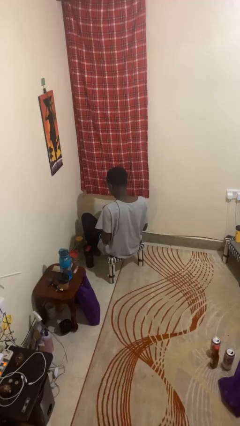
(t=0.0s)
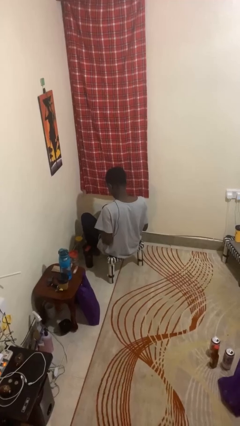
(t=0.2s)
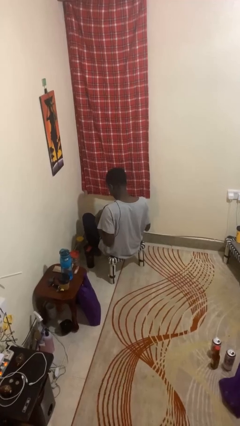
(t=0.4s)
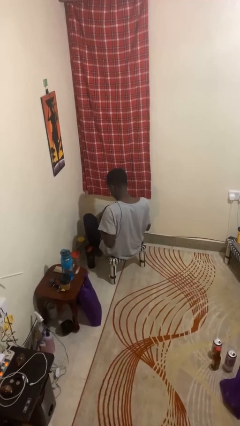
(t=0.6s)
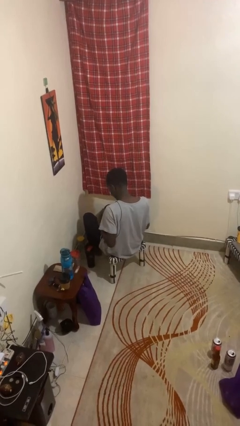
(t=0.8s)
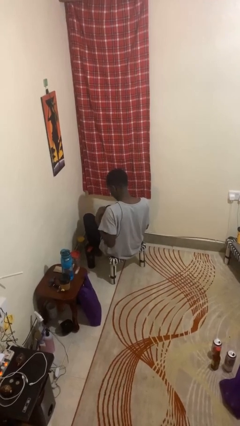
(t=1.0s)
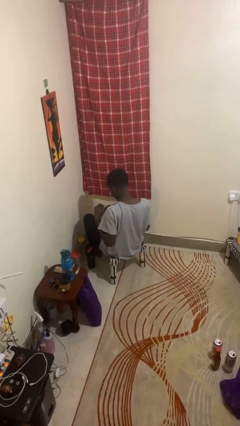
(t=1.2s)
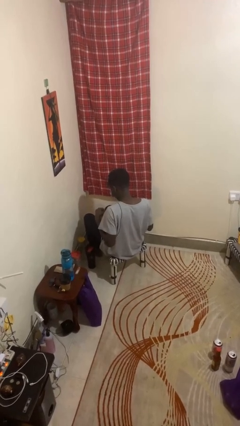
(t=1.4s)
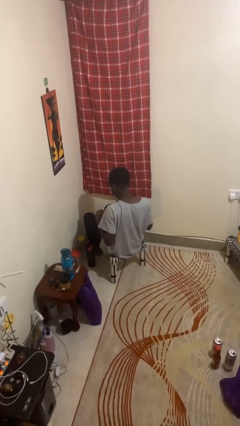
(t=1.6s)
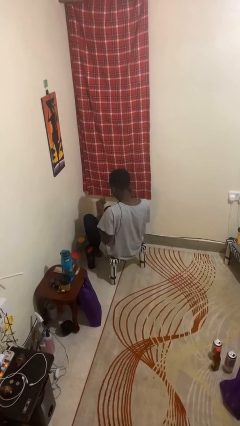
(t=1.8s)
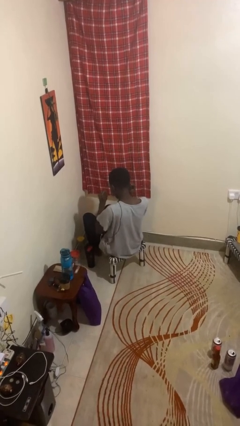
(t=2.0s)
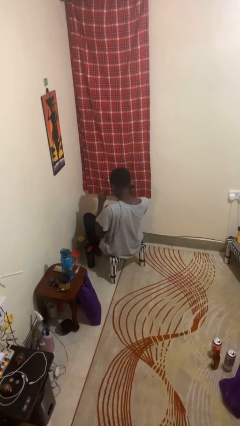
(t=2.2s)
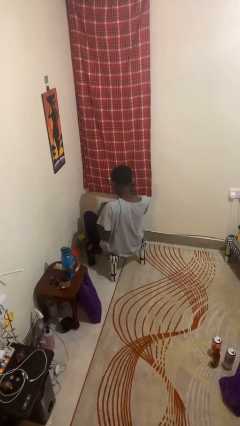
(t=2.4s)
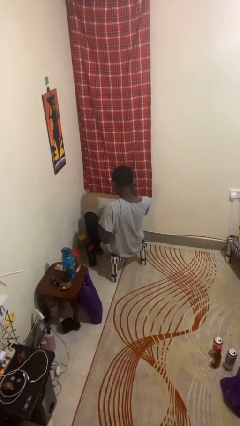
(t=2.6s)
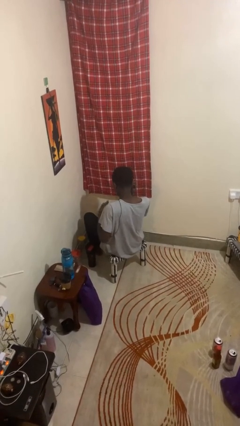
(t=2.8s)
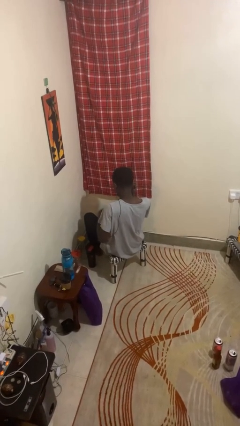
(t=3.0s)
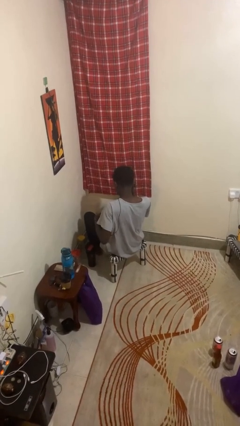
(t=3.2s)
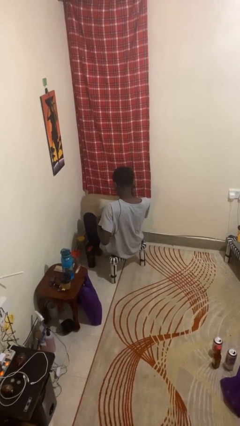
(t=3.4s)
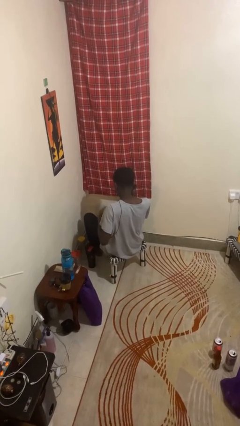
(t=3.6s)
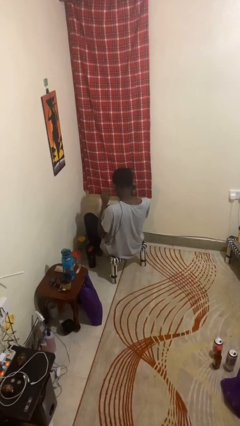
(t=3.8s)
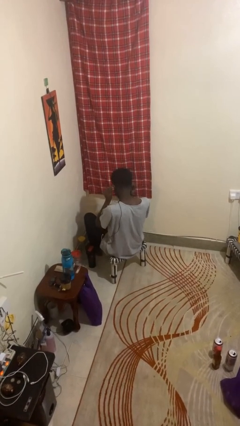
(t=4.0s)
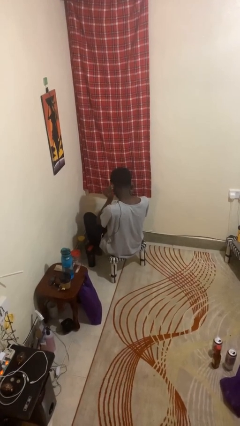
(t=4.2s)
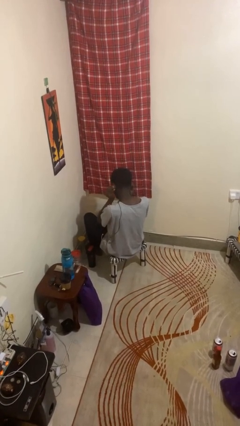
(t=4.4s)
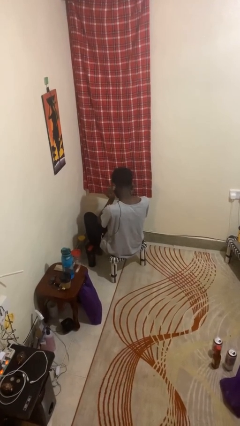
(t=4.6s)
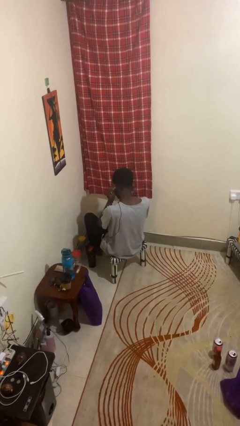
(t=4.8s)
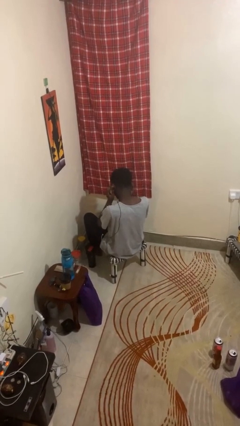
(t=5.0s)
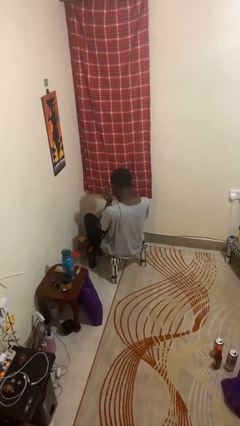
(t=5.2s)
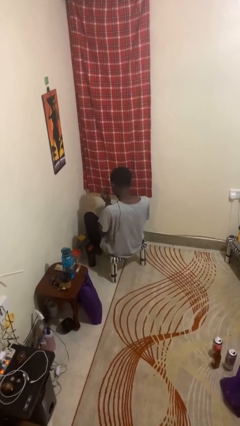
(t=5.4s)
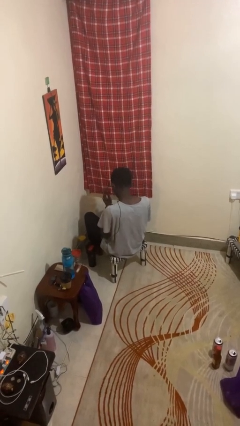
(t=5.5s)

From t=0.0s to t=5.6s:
person puts on headphones

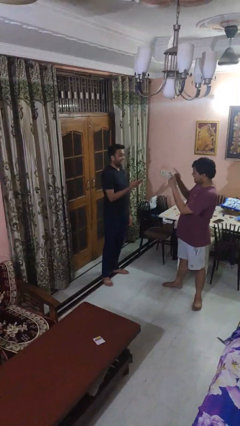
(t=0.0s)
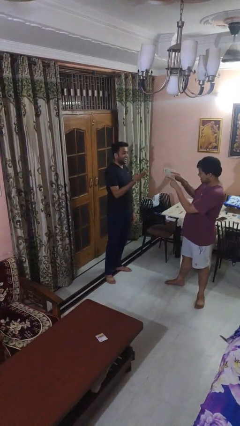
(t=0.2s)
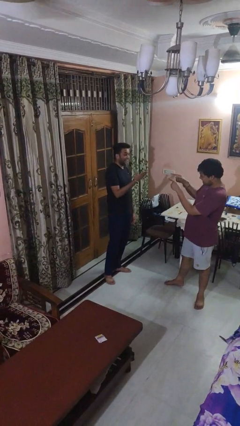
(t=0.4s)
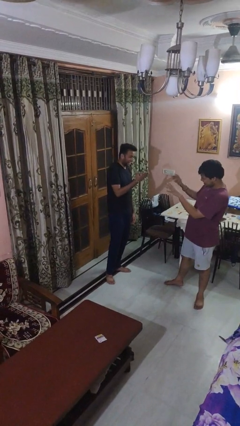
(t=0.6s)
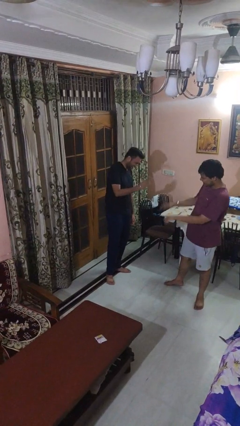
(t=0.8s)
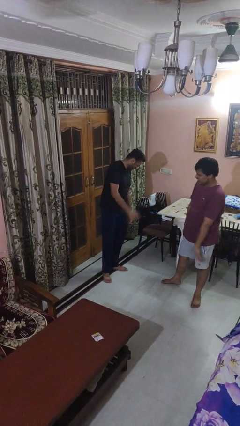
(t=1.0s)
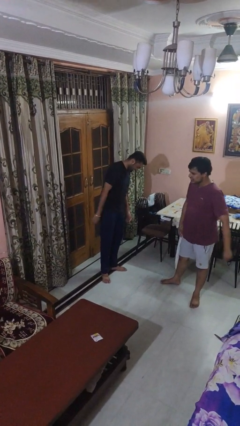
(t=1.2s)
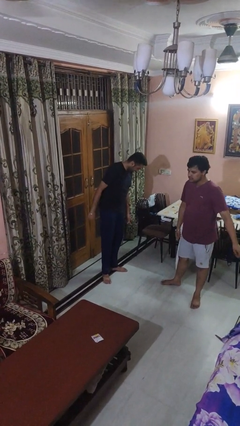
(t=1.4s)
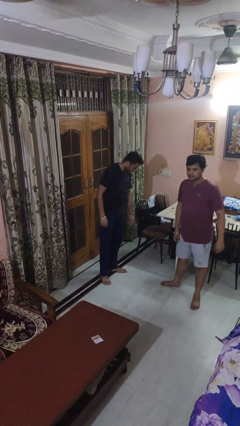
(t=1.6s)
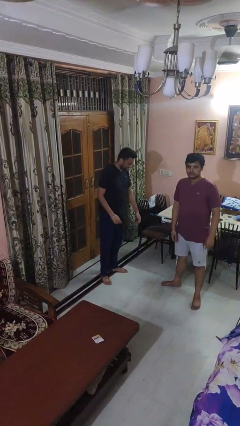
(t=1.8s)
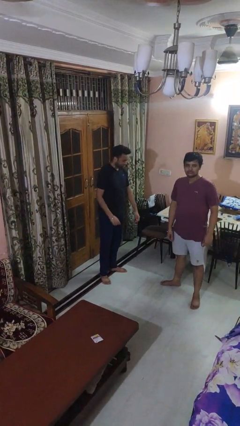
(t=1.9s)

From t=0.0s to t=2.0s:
person laughs with person

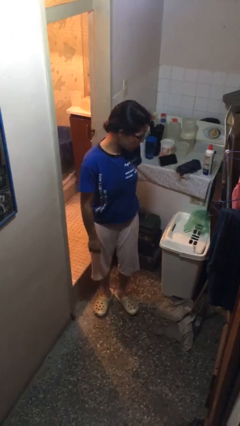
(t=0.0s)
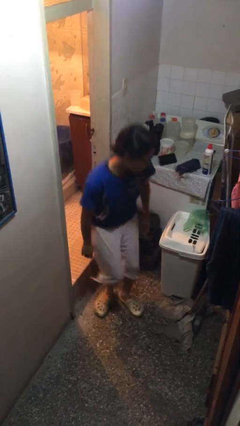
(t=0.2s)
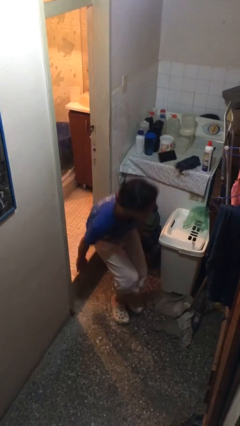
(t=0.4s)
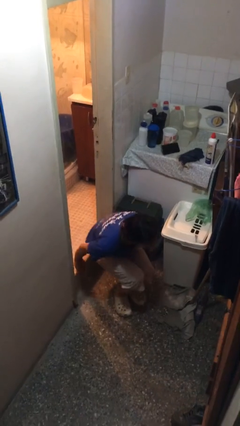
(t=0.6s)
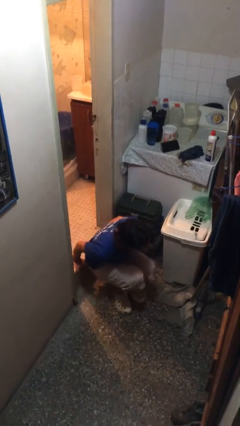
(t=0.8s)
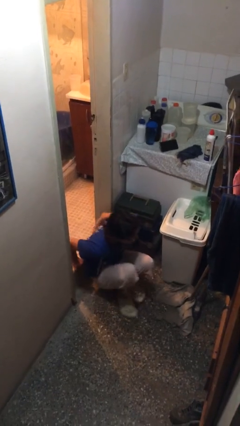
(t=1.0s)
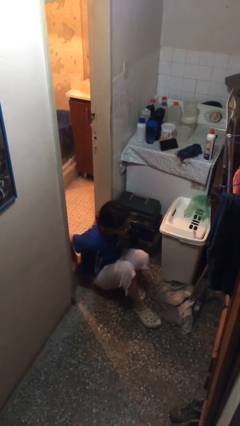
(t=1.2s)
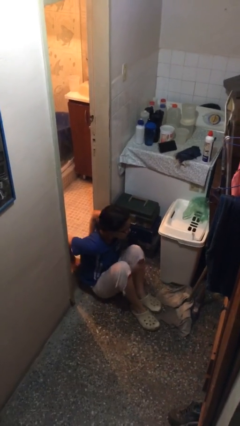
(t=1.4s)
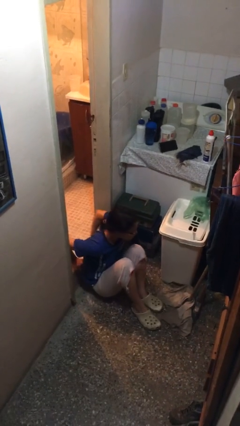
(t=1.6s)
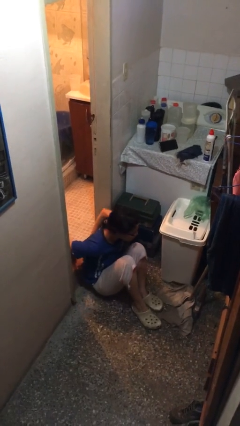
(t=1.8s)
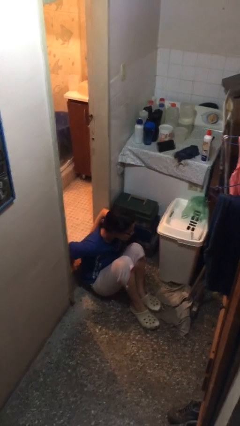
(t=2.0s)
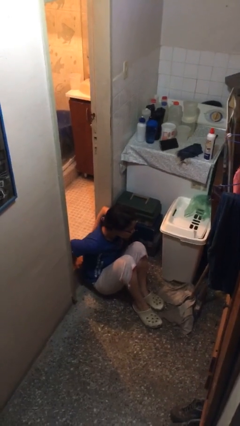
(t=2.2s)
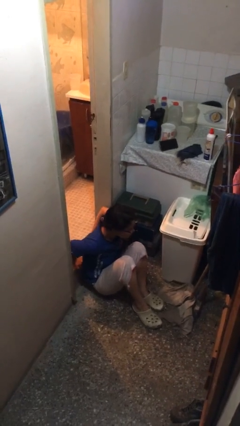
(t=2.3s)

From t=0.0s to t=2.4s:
person sits down

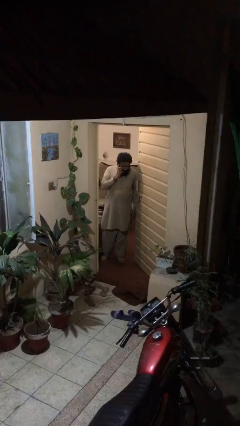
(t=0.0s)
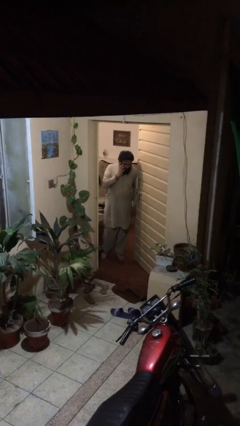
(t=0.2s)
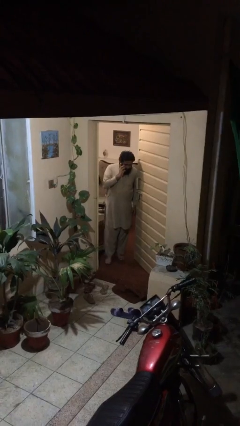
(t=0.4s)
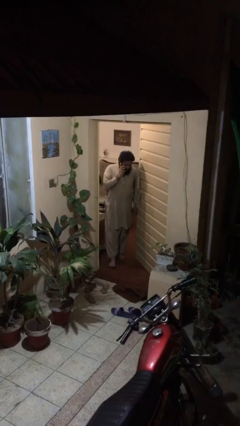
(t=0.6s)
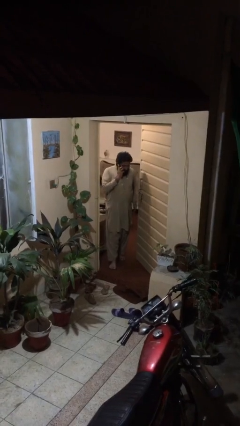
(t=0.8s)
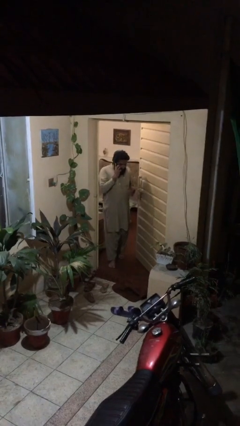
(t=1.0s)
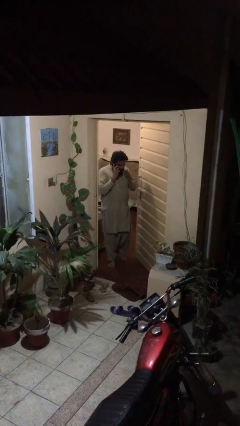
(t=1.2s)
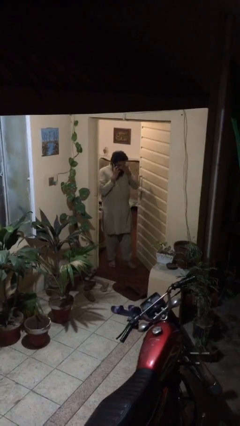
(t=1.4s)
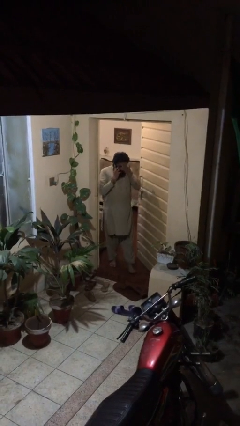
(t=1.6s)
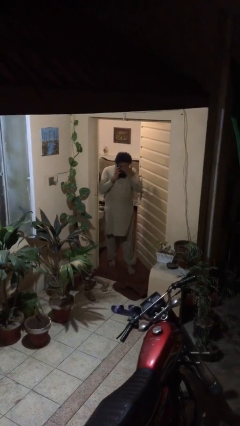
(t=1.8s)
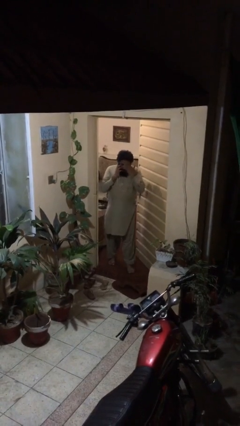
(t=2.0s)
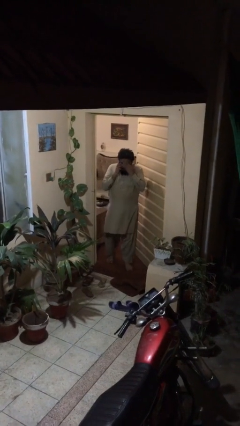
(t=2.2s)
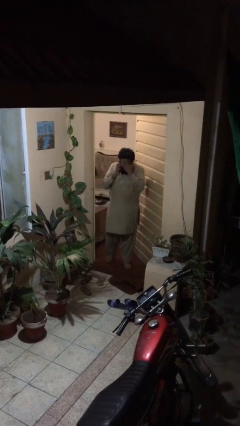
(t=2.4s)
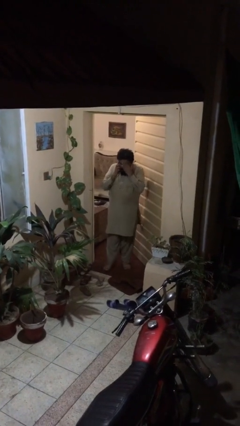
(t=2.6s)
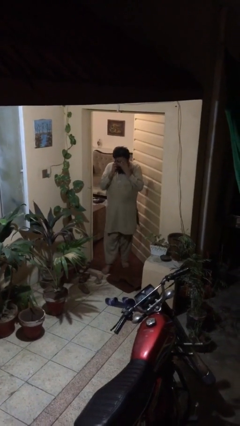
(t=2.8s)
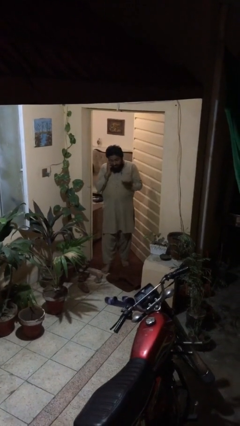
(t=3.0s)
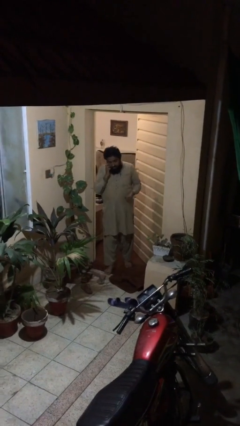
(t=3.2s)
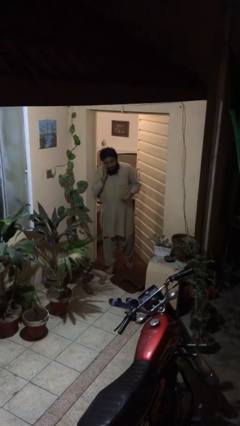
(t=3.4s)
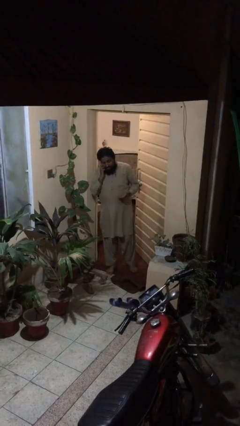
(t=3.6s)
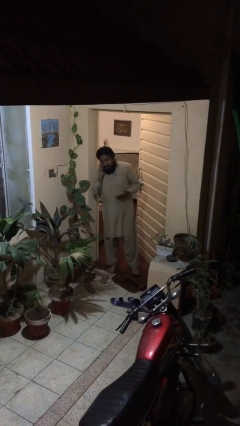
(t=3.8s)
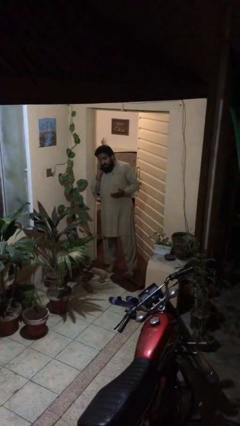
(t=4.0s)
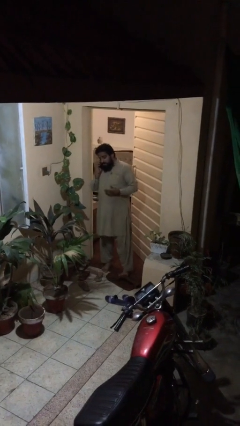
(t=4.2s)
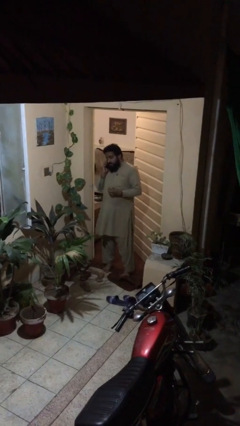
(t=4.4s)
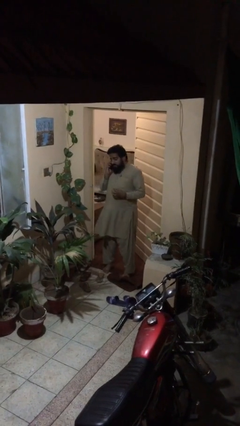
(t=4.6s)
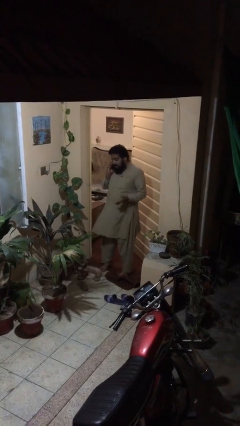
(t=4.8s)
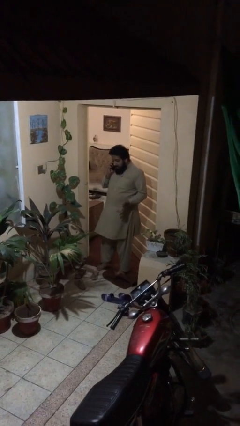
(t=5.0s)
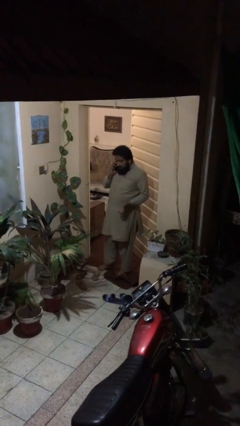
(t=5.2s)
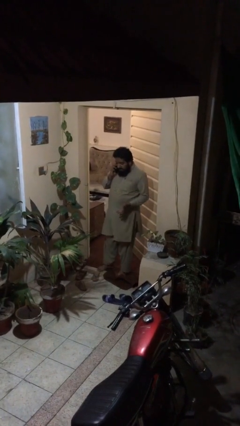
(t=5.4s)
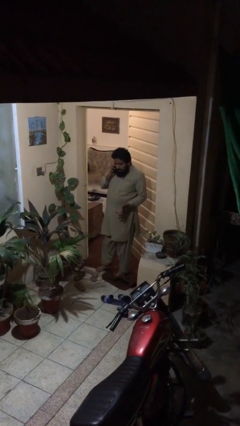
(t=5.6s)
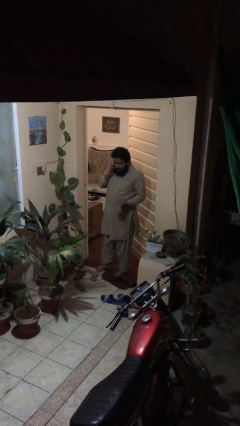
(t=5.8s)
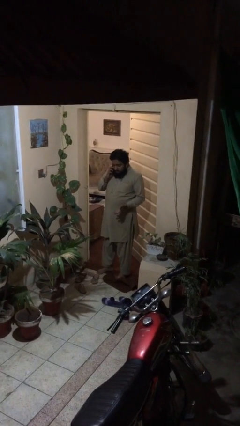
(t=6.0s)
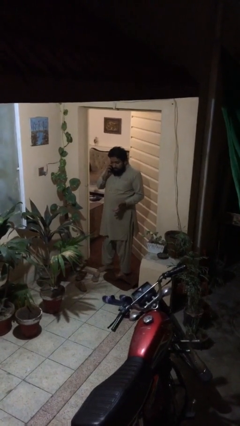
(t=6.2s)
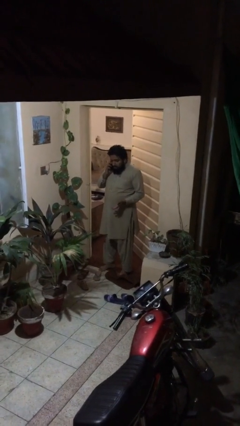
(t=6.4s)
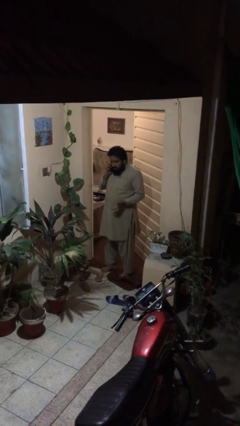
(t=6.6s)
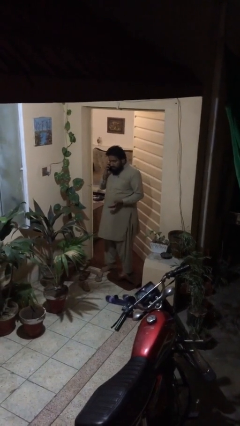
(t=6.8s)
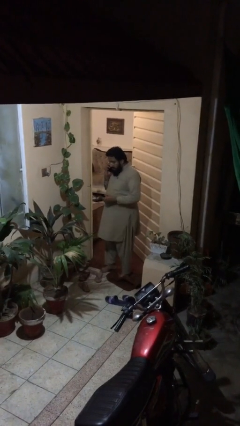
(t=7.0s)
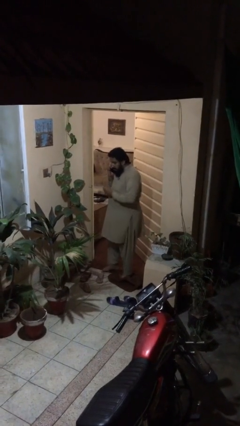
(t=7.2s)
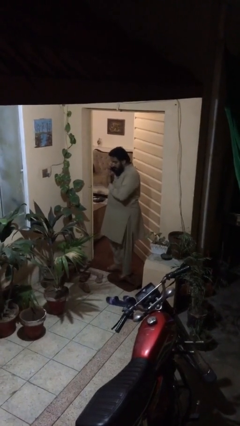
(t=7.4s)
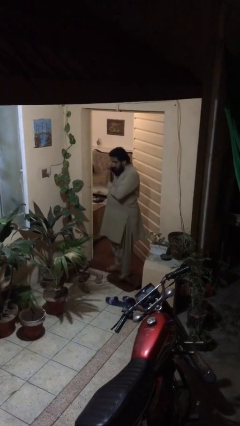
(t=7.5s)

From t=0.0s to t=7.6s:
person enters scene through structure
